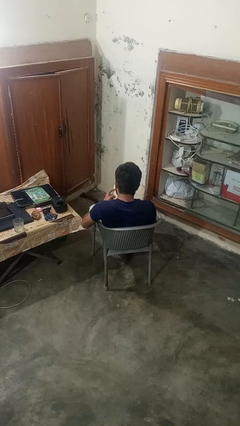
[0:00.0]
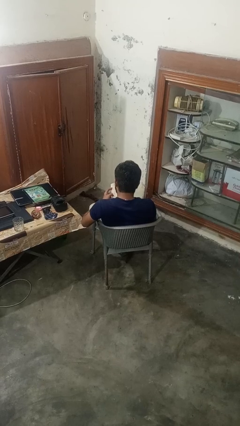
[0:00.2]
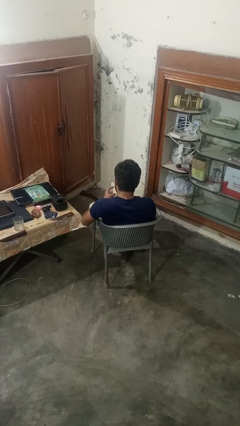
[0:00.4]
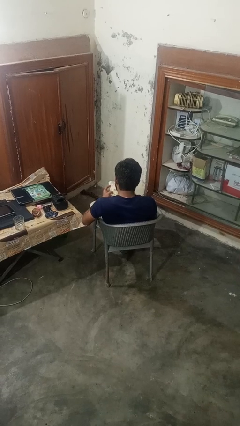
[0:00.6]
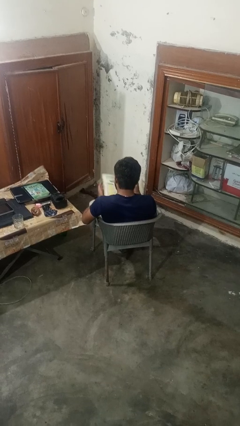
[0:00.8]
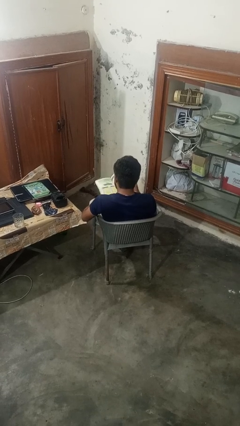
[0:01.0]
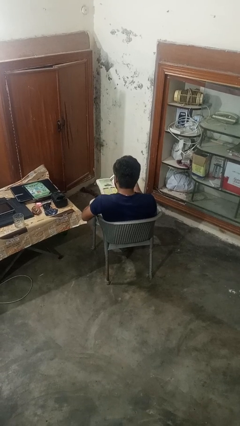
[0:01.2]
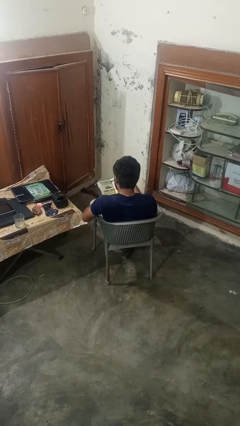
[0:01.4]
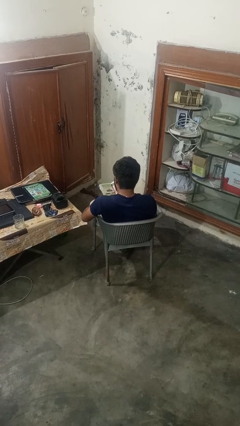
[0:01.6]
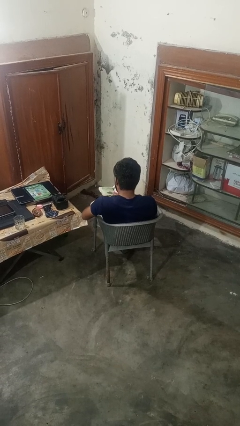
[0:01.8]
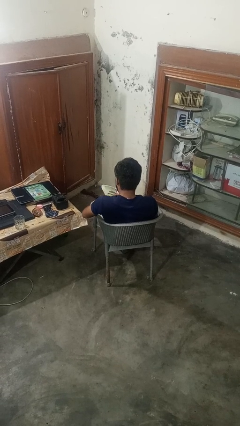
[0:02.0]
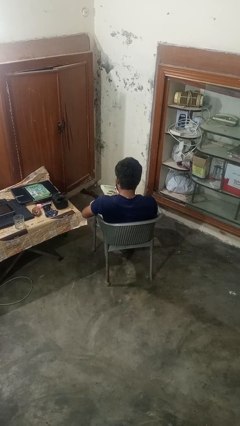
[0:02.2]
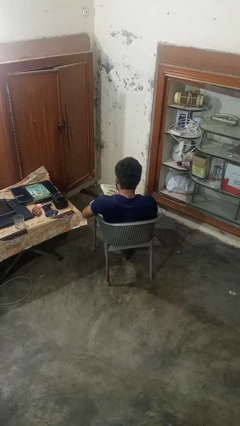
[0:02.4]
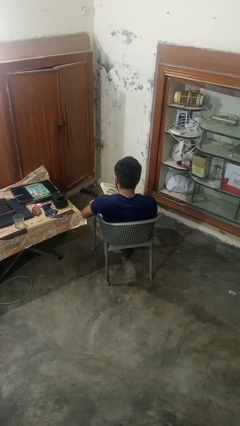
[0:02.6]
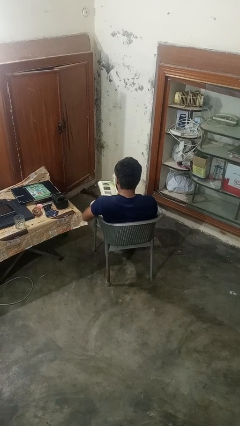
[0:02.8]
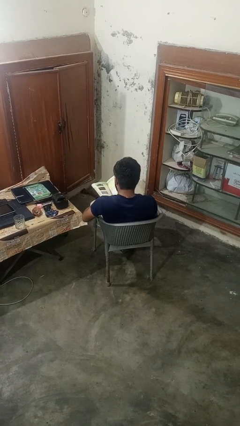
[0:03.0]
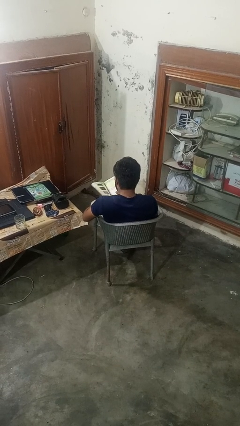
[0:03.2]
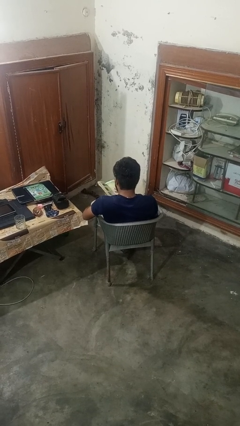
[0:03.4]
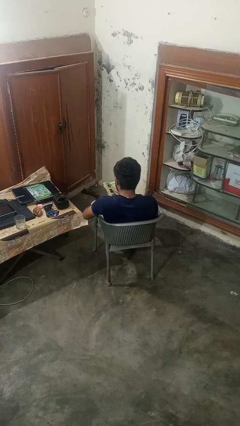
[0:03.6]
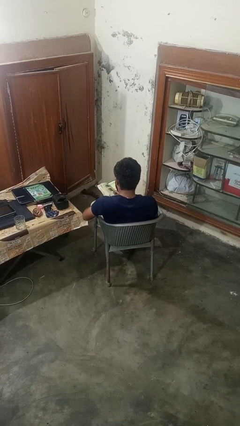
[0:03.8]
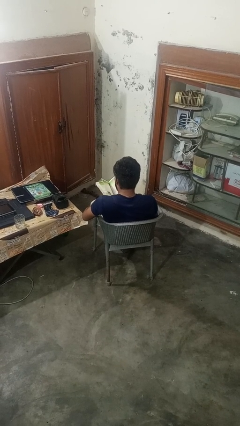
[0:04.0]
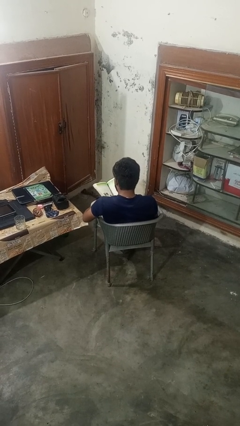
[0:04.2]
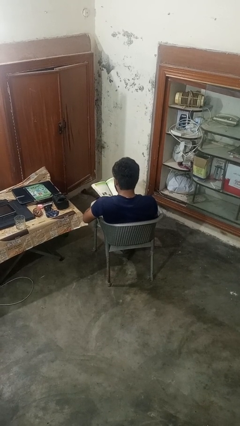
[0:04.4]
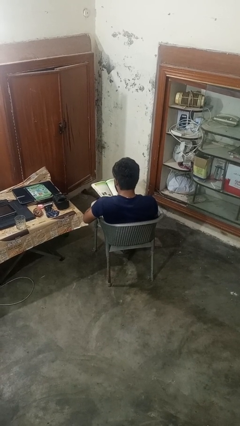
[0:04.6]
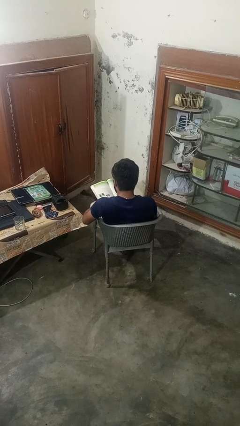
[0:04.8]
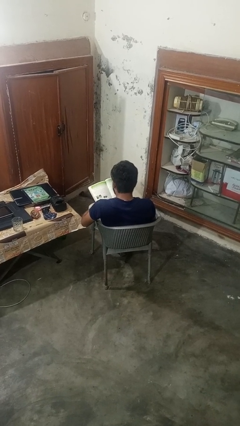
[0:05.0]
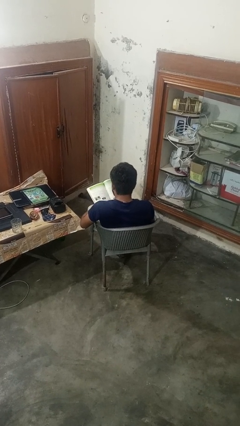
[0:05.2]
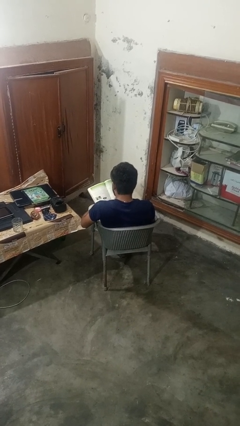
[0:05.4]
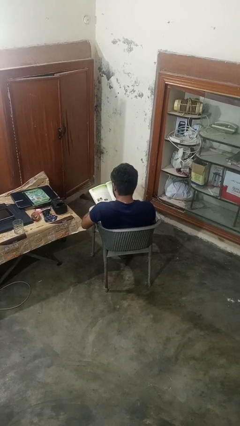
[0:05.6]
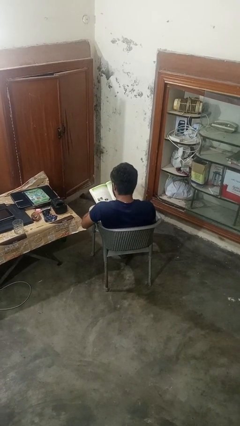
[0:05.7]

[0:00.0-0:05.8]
person reads book

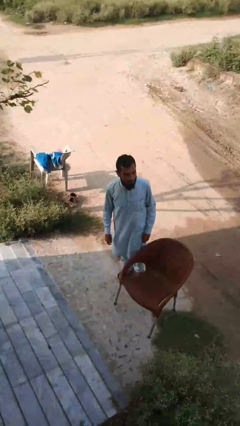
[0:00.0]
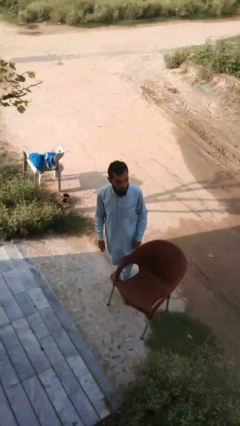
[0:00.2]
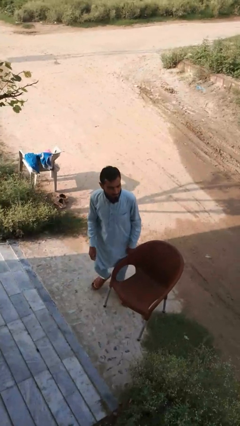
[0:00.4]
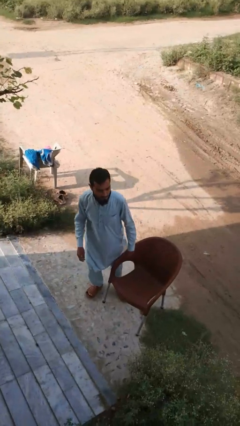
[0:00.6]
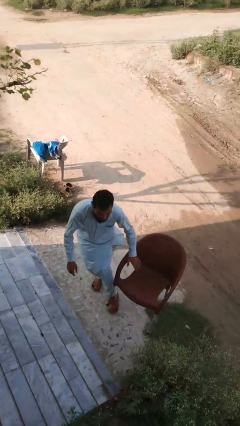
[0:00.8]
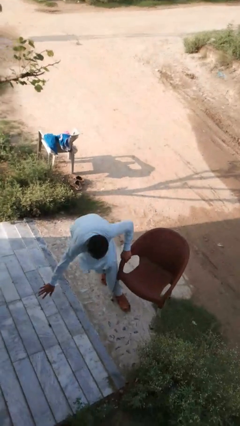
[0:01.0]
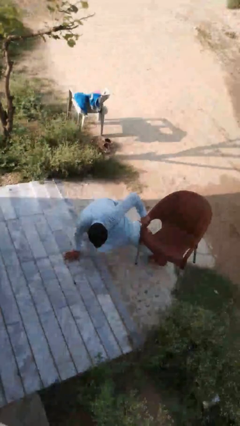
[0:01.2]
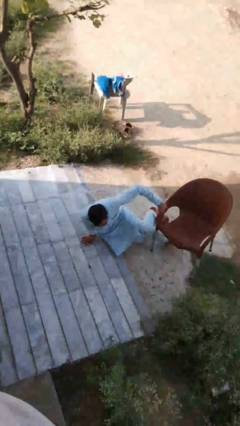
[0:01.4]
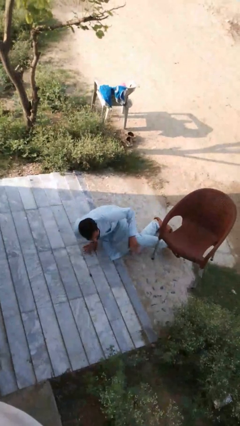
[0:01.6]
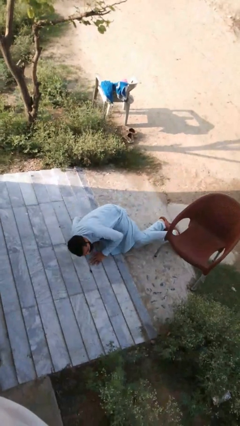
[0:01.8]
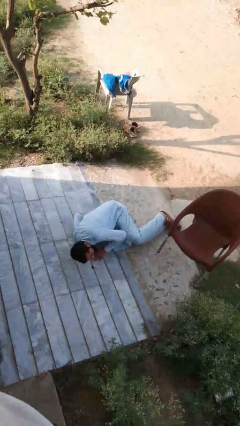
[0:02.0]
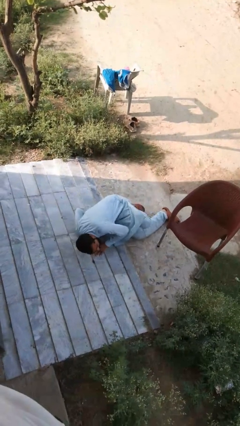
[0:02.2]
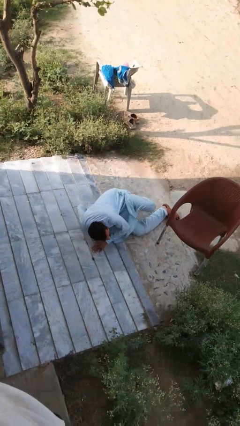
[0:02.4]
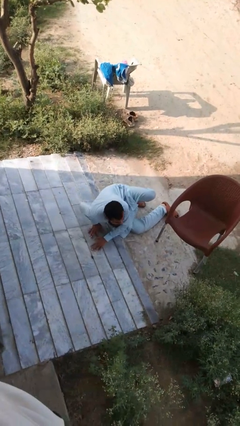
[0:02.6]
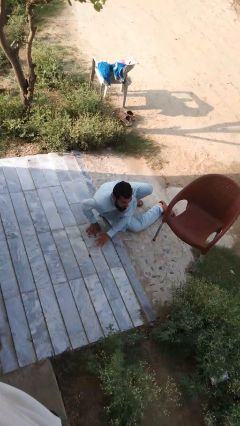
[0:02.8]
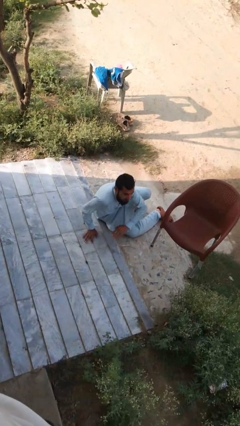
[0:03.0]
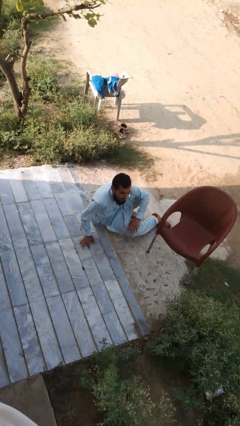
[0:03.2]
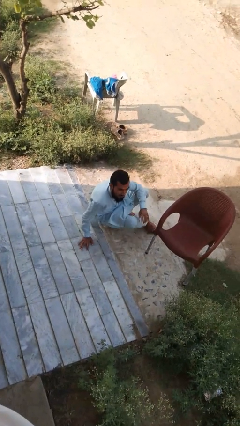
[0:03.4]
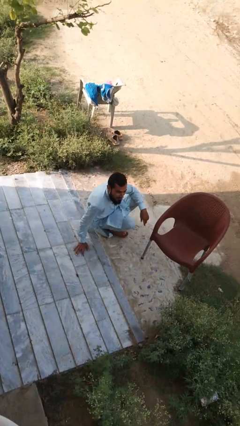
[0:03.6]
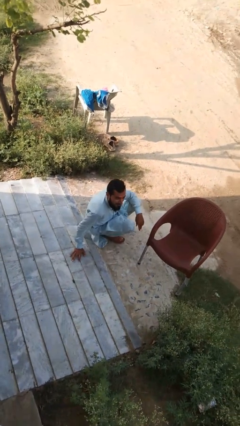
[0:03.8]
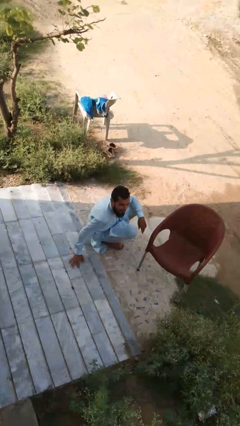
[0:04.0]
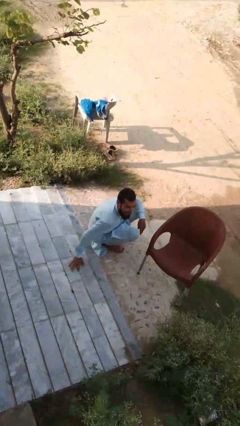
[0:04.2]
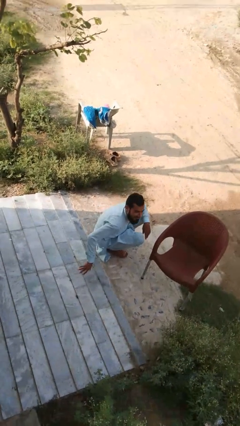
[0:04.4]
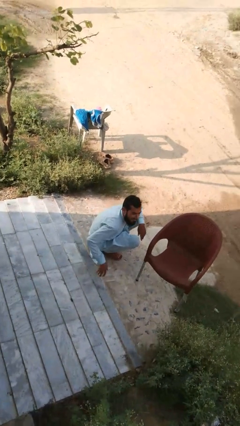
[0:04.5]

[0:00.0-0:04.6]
person trips on object on floor

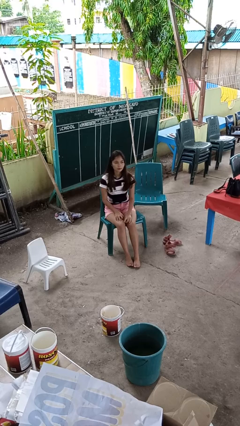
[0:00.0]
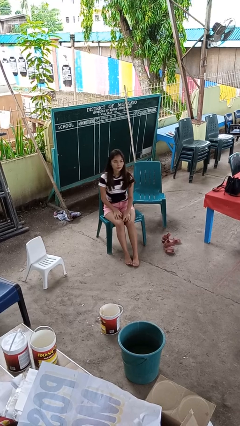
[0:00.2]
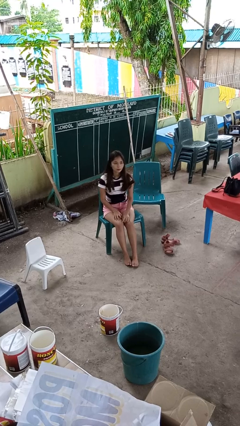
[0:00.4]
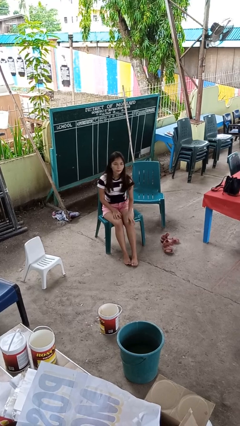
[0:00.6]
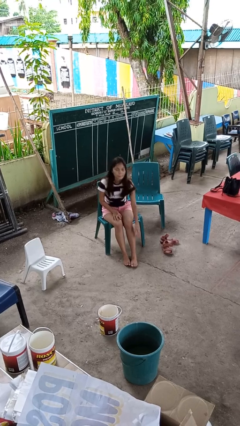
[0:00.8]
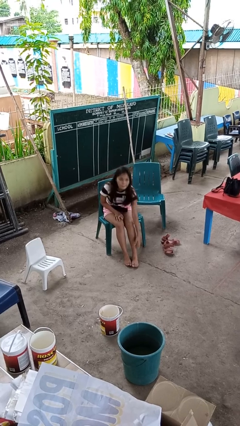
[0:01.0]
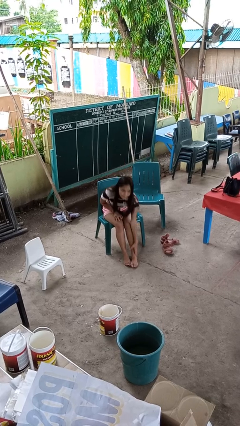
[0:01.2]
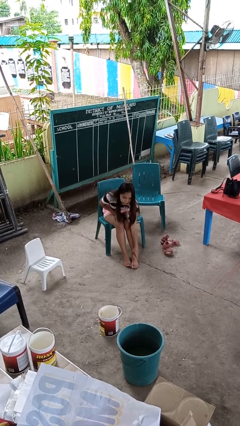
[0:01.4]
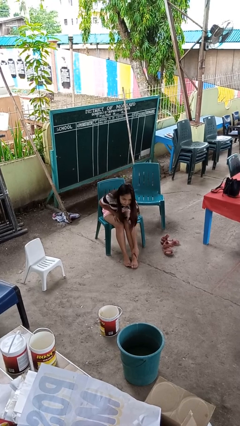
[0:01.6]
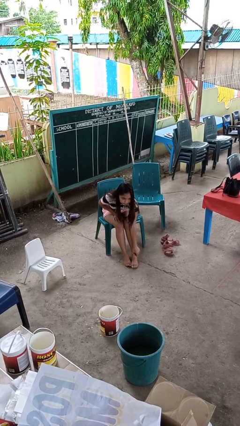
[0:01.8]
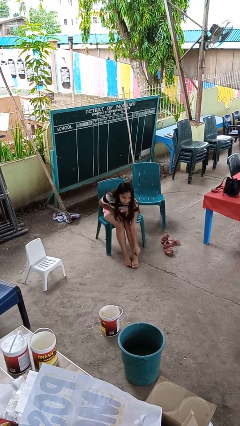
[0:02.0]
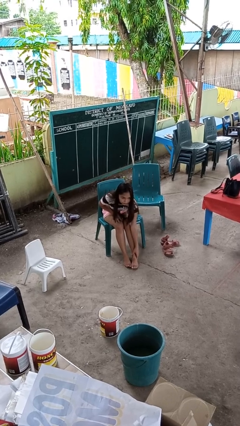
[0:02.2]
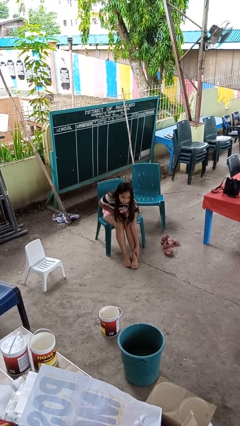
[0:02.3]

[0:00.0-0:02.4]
person rubs foot

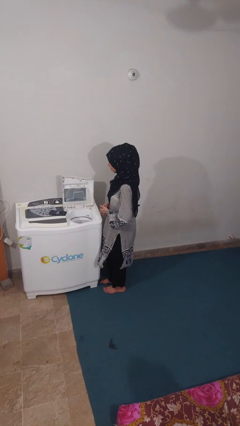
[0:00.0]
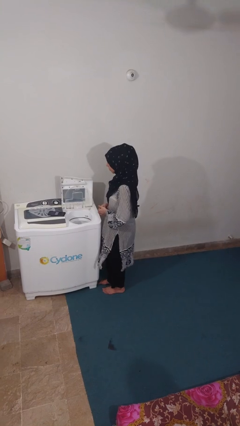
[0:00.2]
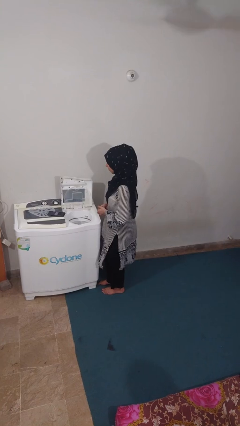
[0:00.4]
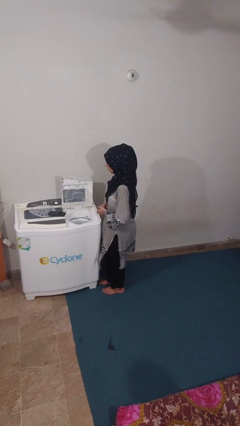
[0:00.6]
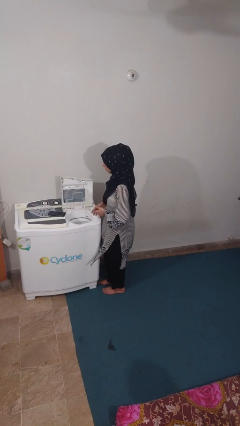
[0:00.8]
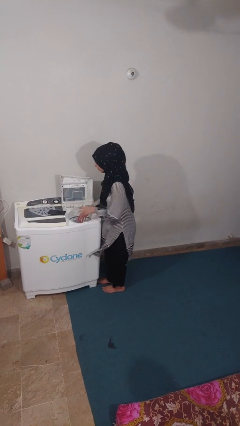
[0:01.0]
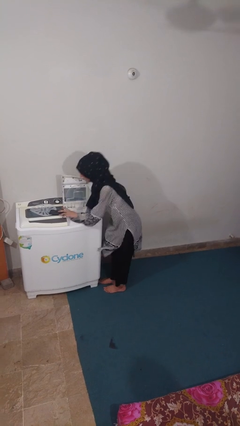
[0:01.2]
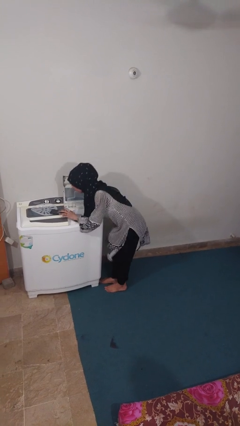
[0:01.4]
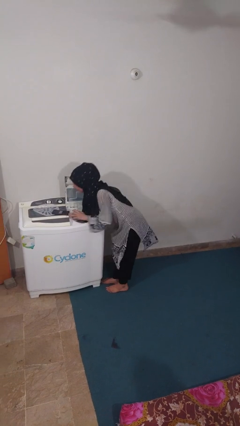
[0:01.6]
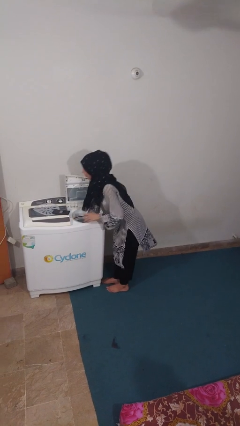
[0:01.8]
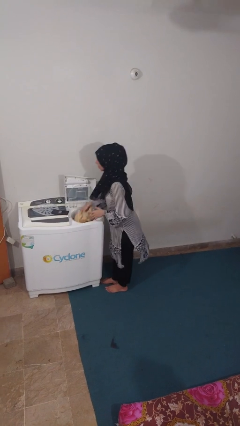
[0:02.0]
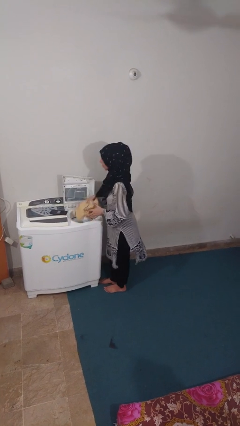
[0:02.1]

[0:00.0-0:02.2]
person unloads dryer

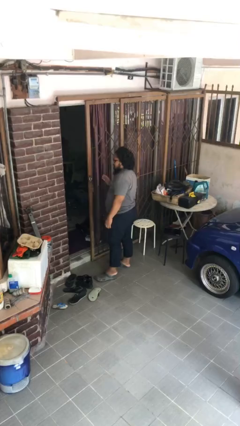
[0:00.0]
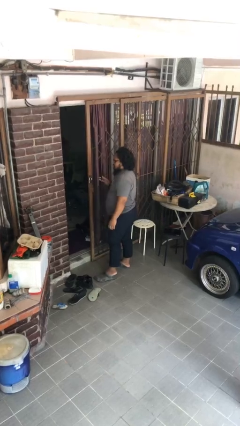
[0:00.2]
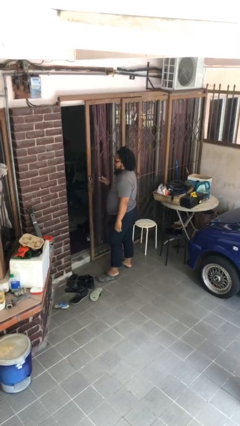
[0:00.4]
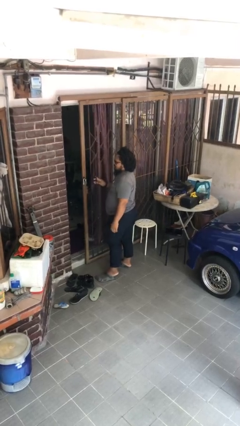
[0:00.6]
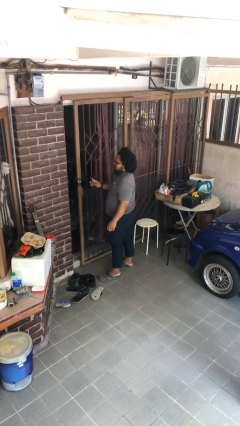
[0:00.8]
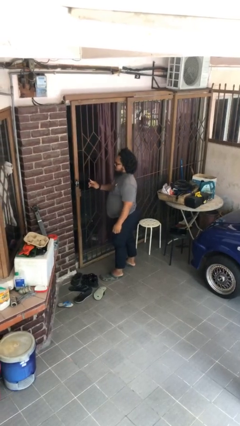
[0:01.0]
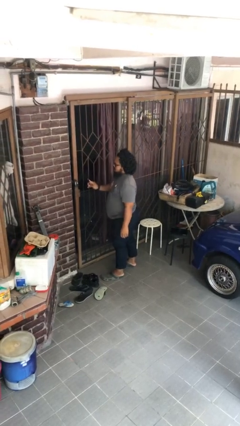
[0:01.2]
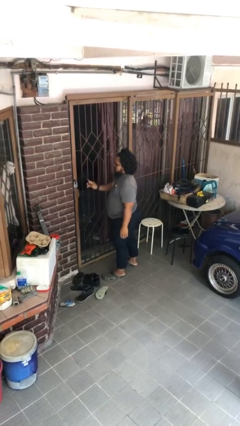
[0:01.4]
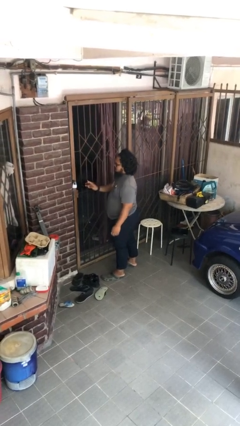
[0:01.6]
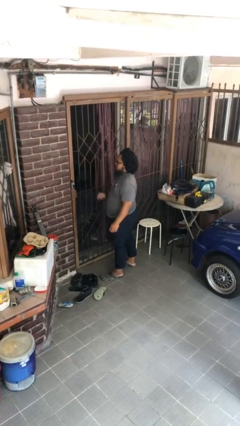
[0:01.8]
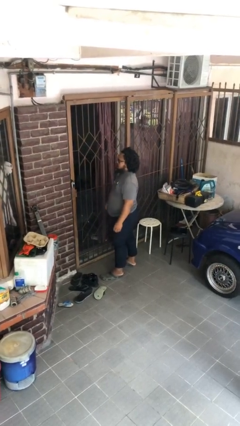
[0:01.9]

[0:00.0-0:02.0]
person closes facility door

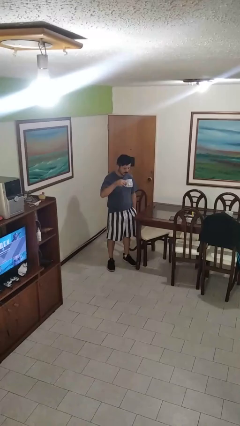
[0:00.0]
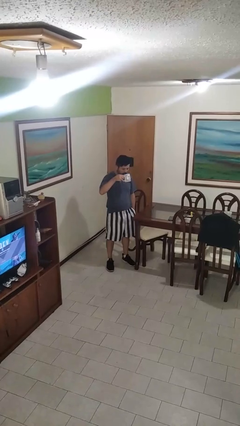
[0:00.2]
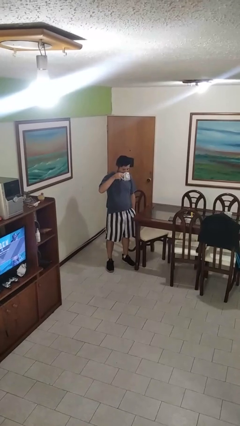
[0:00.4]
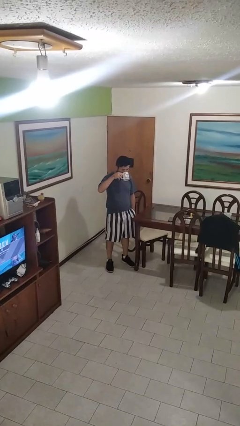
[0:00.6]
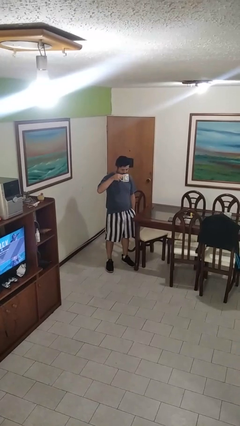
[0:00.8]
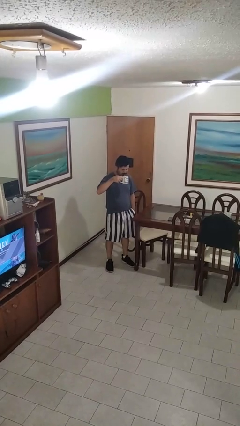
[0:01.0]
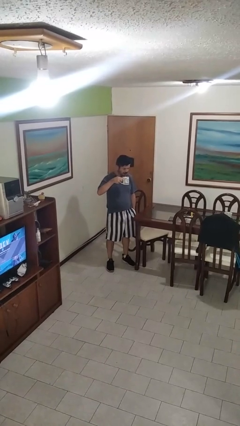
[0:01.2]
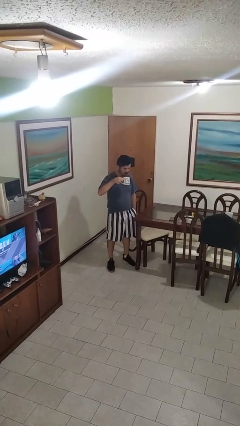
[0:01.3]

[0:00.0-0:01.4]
person drinks from mug
